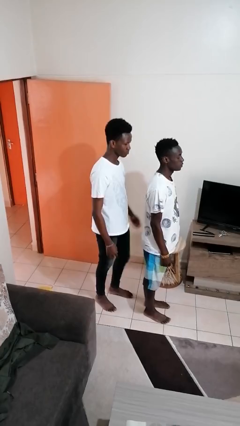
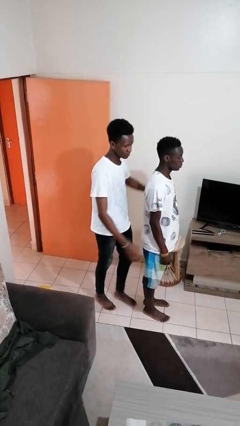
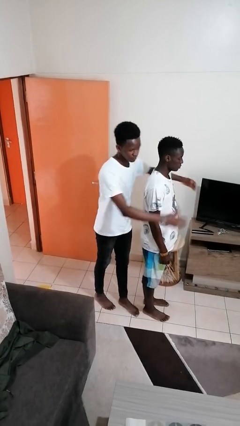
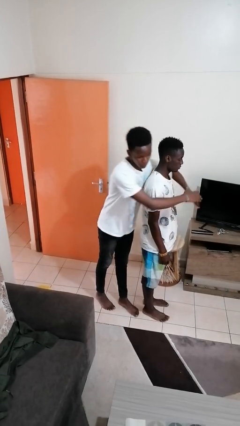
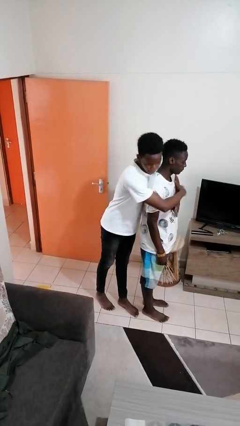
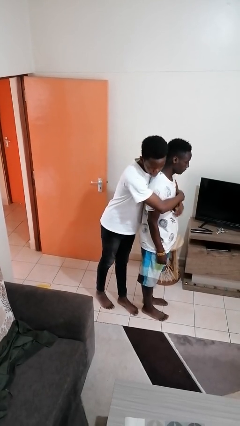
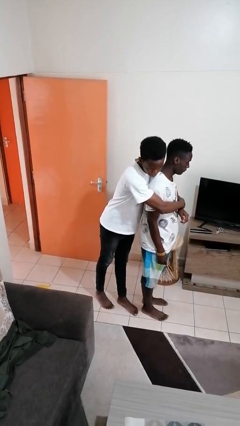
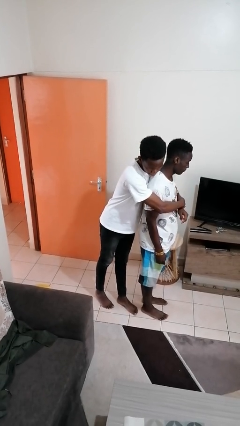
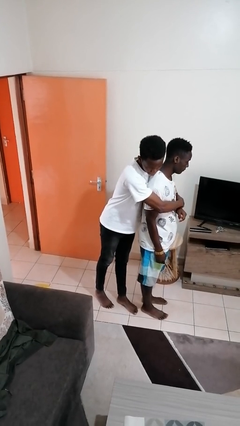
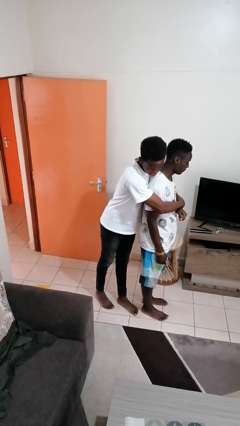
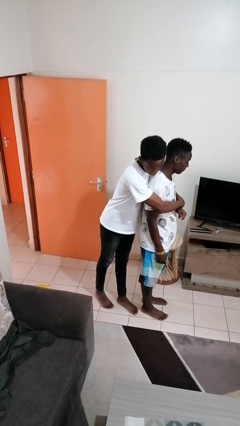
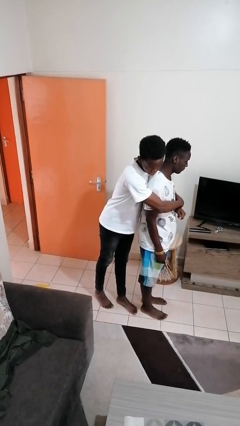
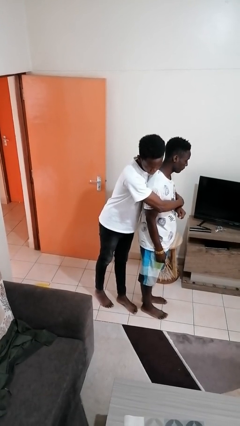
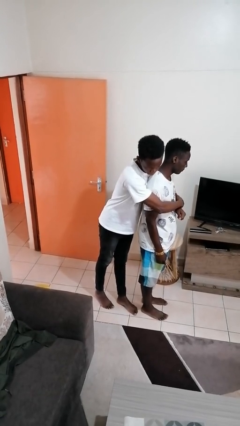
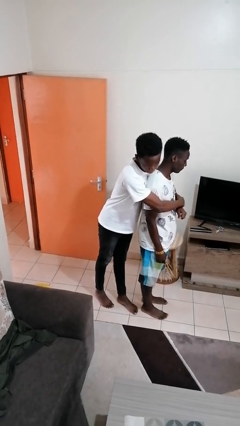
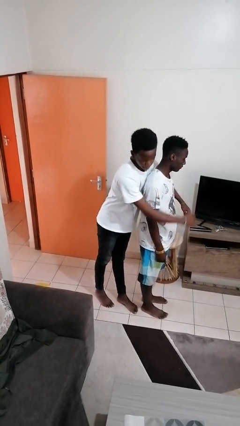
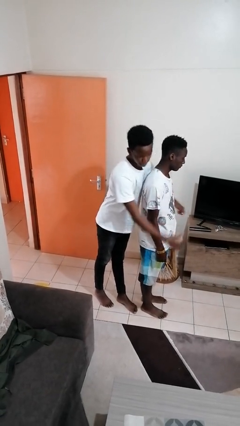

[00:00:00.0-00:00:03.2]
person hugs person from behind

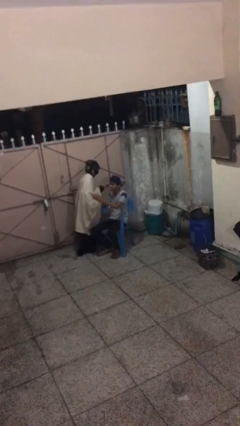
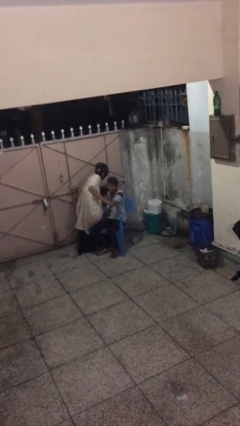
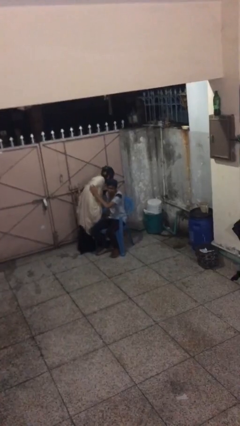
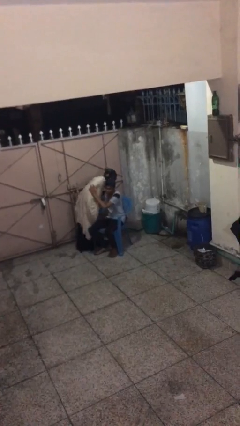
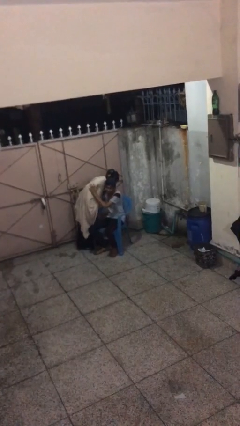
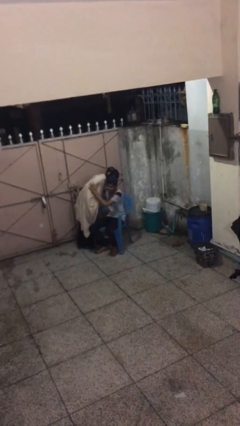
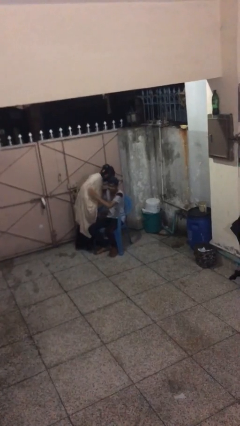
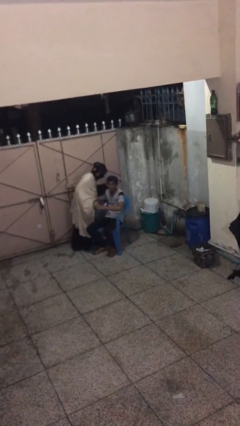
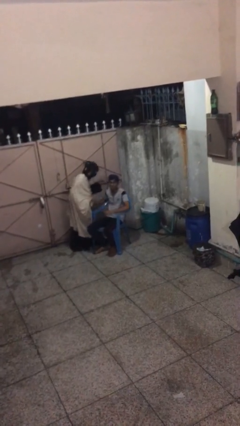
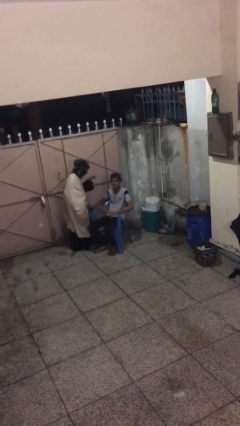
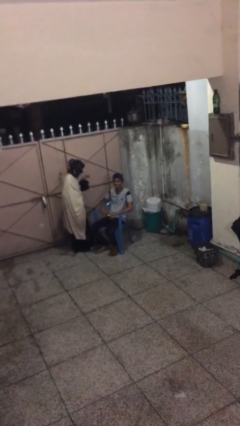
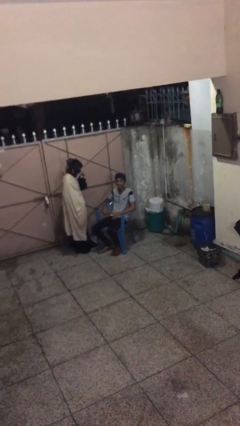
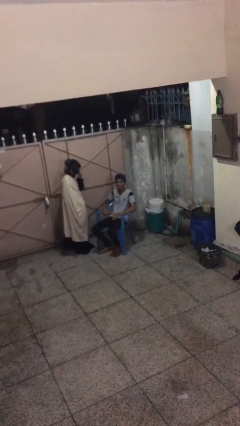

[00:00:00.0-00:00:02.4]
person embraces person

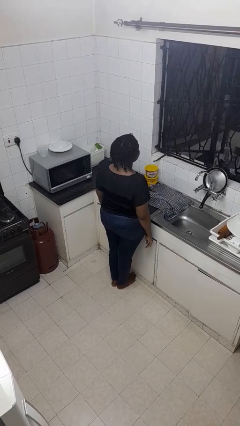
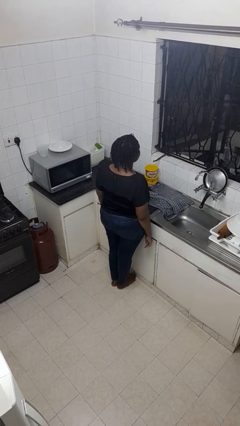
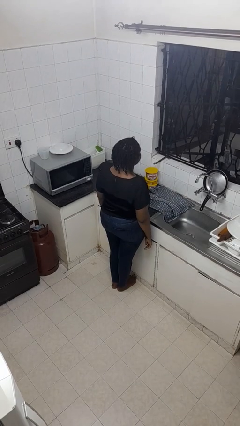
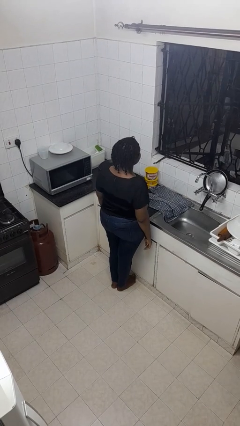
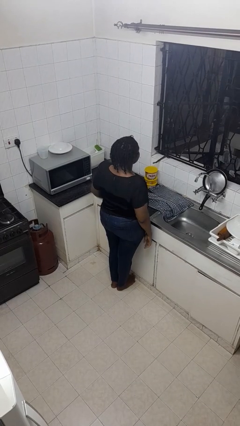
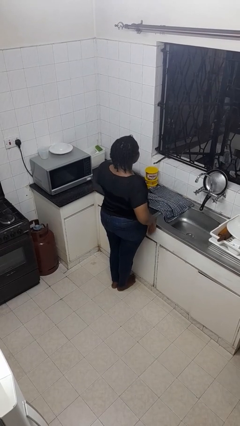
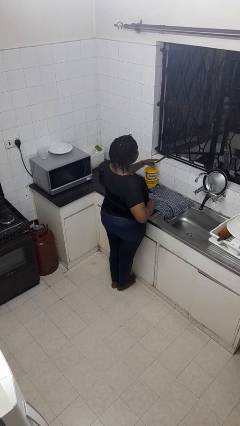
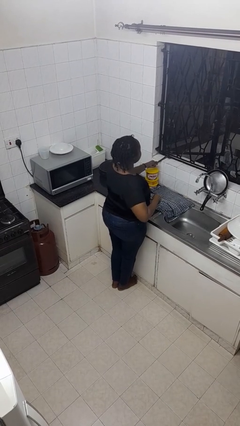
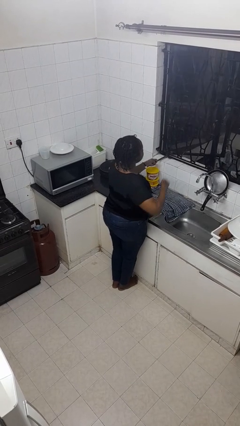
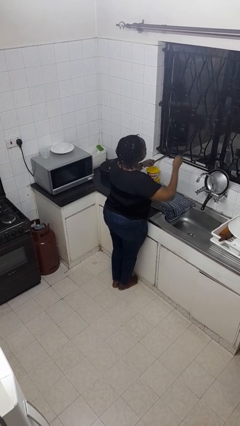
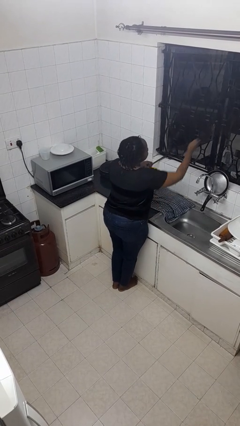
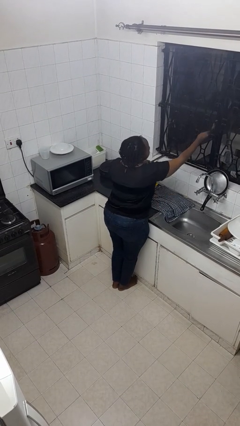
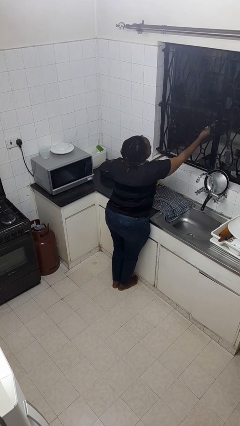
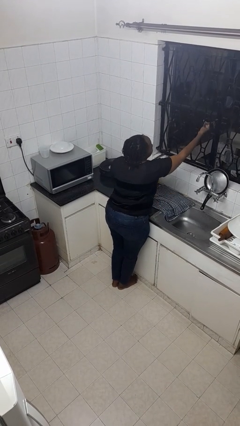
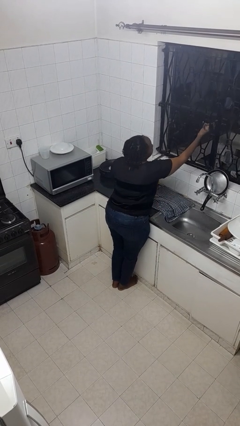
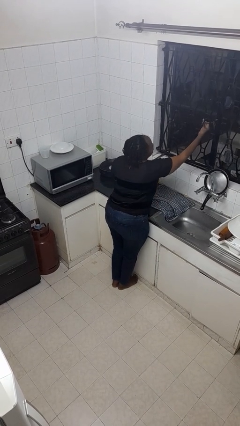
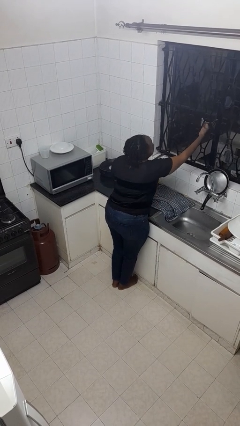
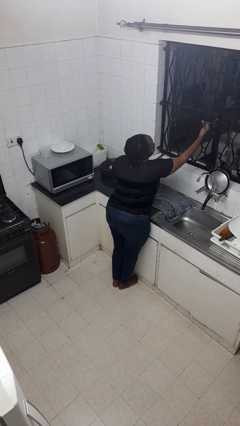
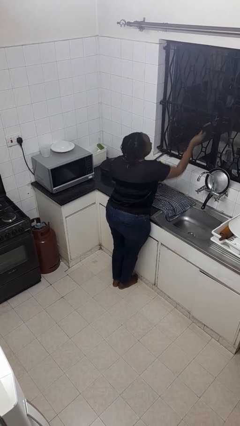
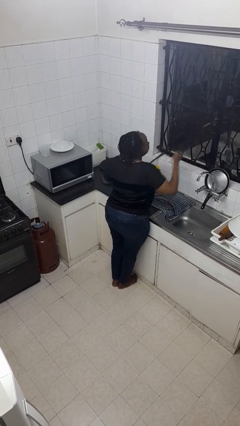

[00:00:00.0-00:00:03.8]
person closes home window

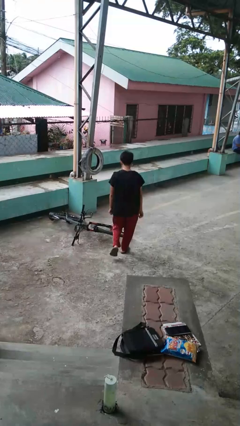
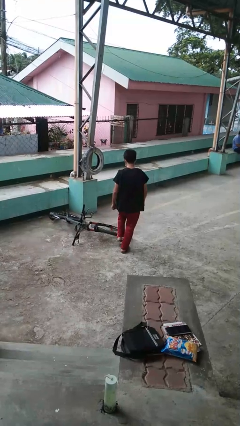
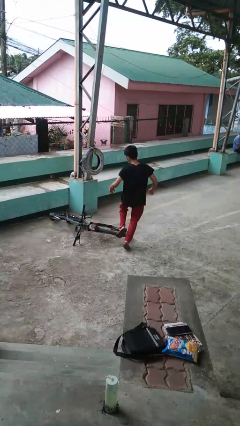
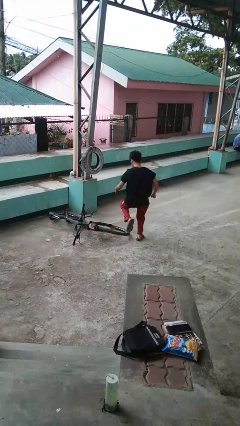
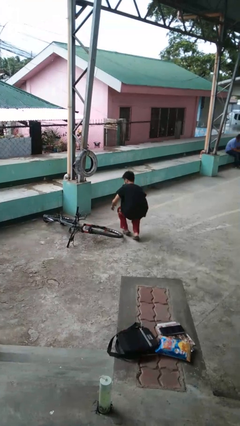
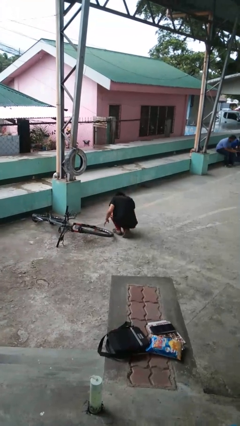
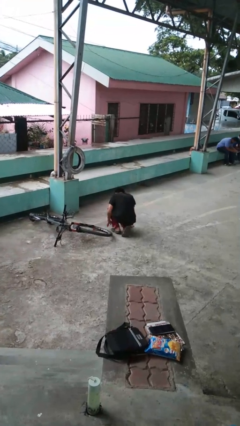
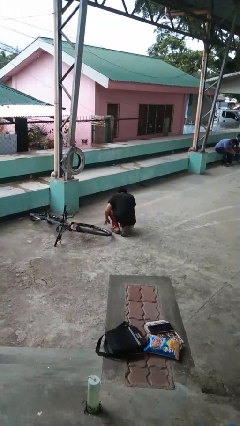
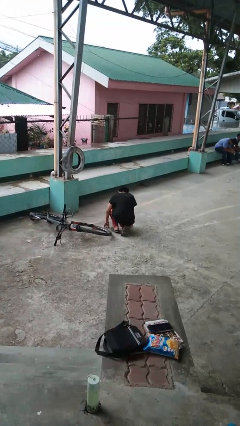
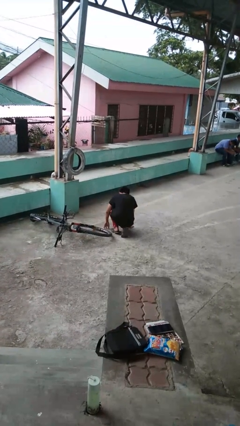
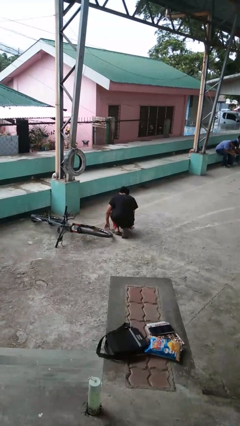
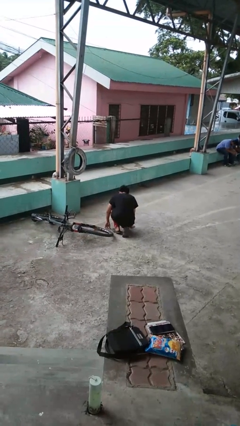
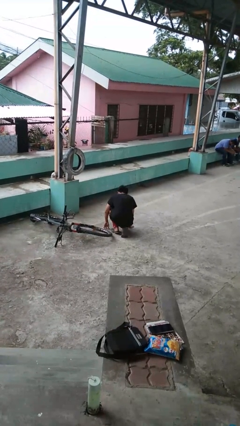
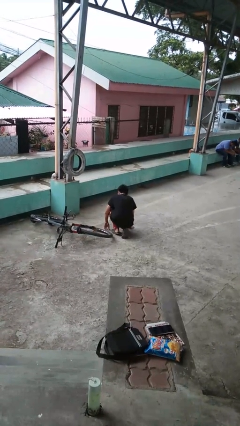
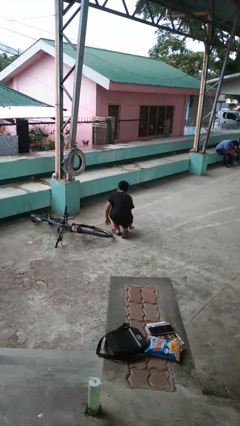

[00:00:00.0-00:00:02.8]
person trips on object on floor

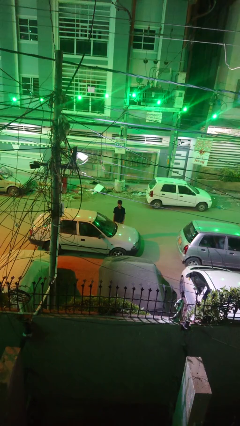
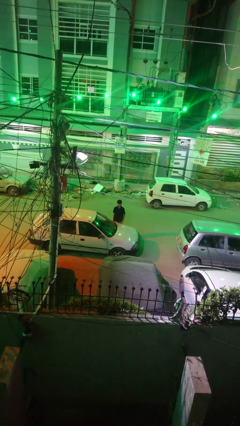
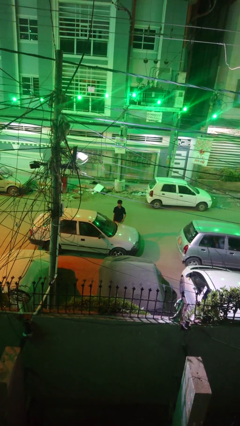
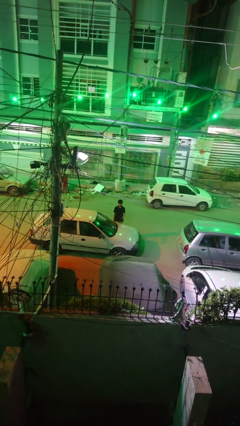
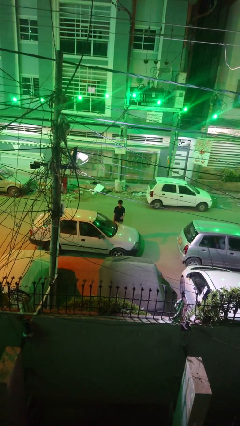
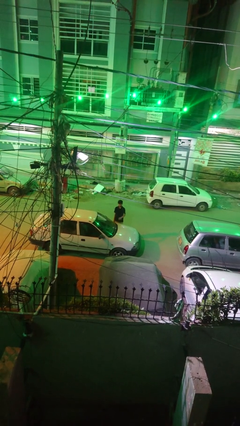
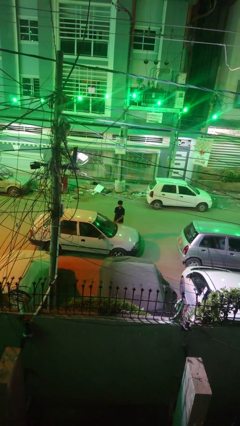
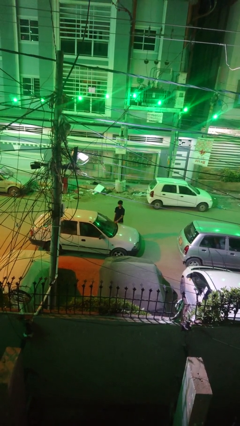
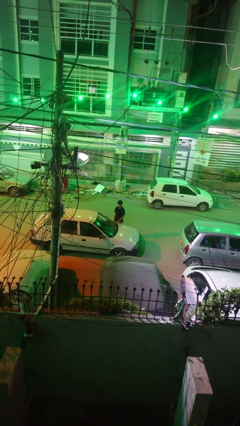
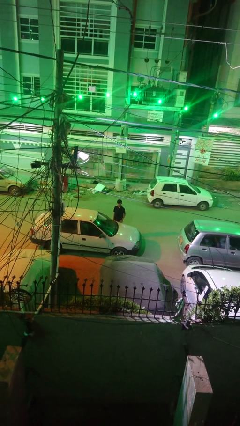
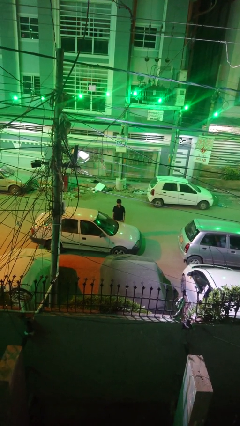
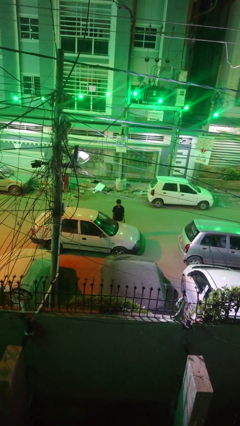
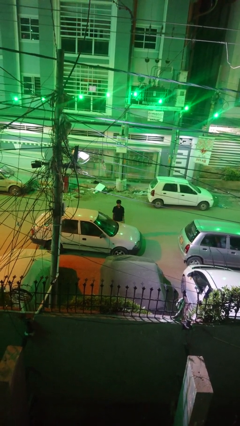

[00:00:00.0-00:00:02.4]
person flips down car wipers

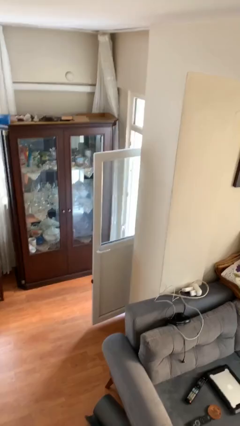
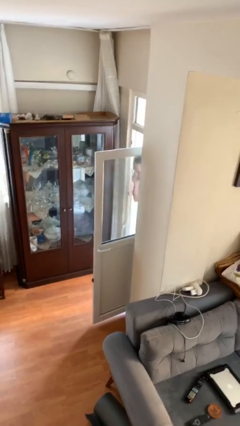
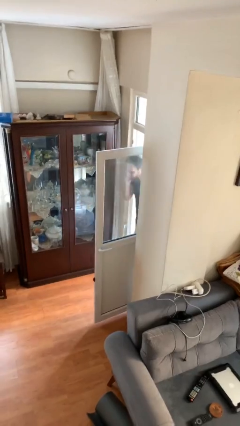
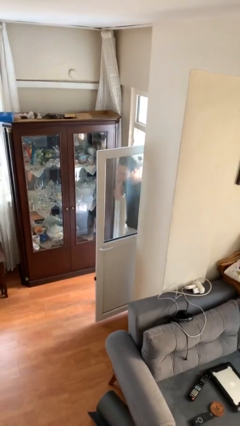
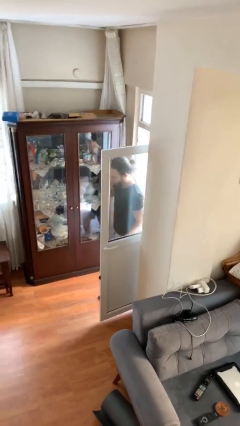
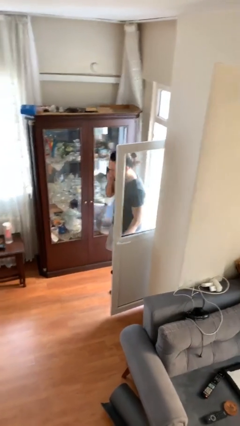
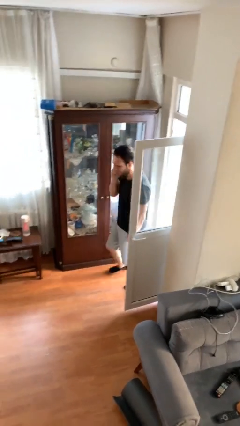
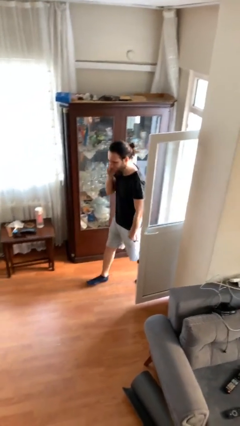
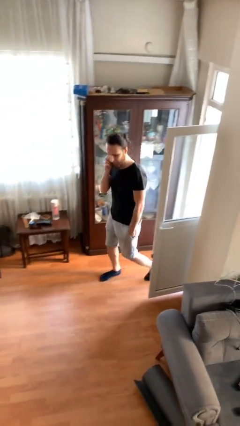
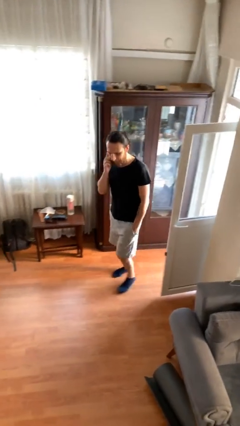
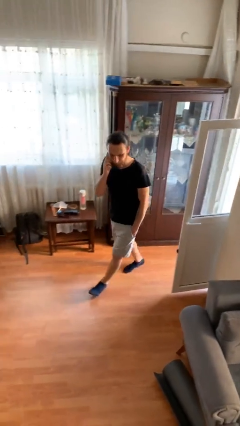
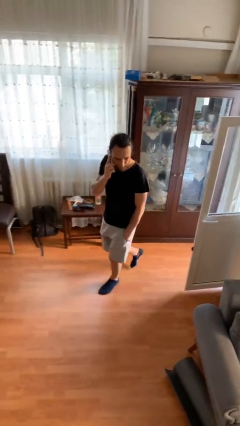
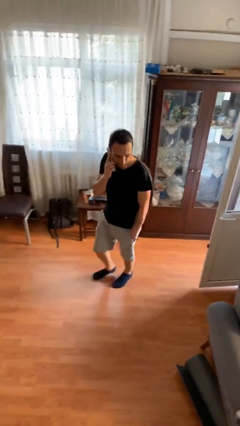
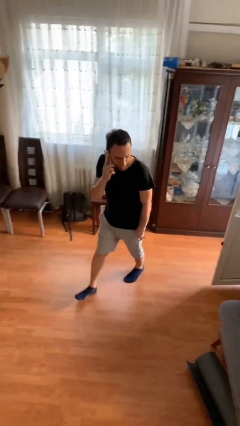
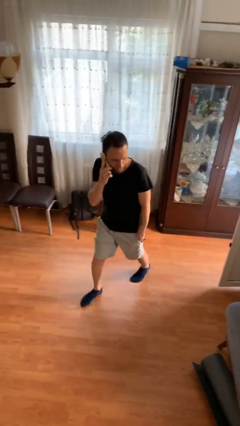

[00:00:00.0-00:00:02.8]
person enters scene through structure
